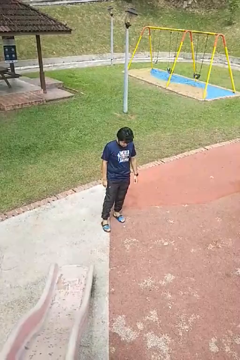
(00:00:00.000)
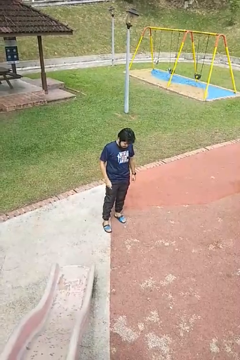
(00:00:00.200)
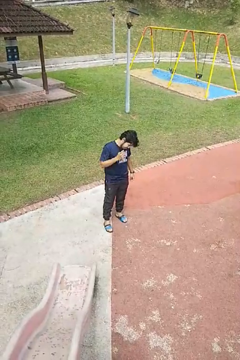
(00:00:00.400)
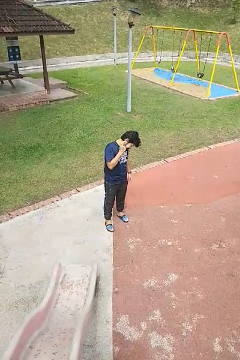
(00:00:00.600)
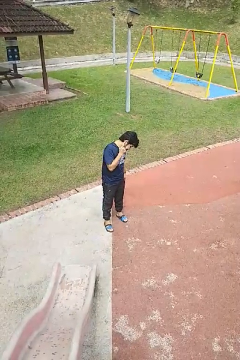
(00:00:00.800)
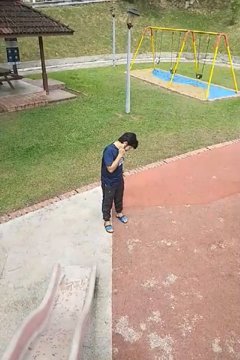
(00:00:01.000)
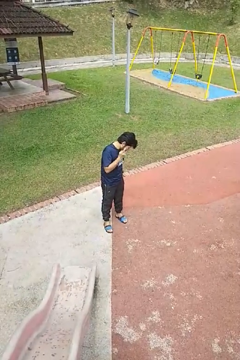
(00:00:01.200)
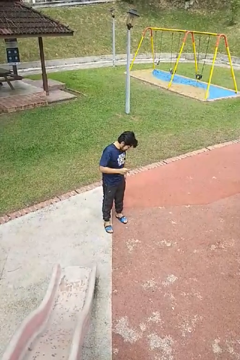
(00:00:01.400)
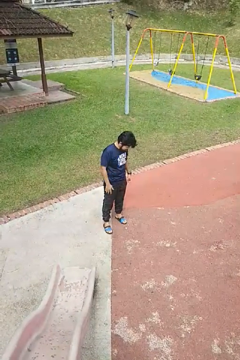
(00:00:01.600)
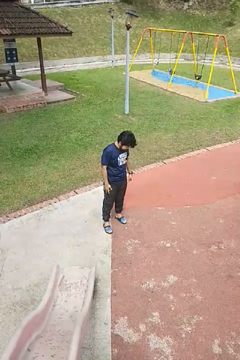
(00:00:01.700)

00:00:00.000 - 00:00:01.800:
person gestures listen closely

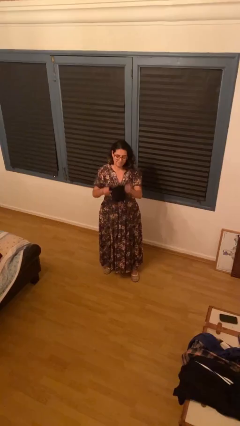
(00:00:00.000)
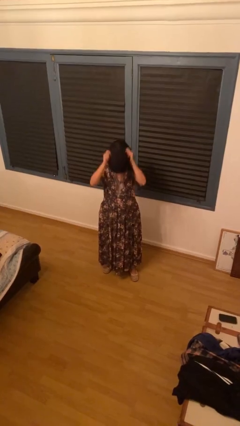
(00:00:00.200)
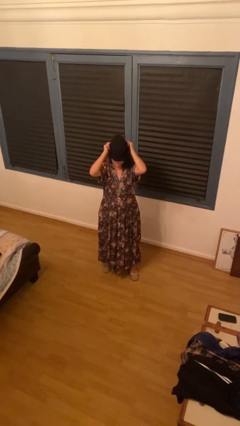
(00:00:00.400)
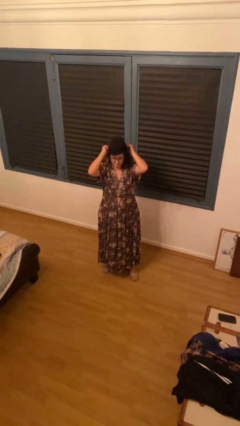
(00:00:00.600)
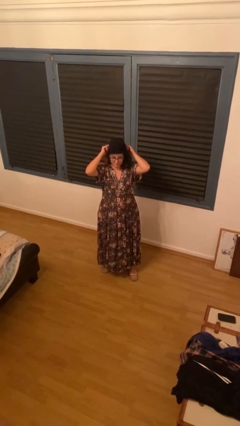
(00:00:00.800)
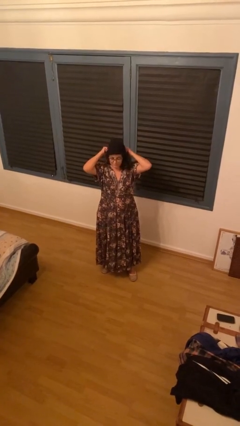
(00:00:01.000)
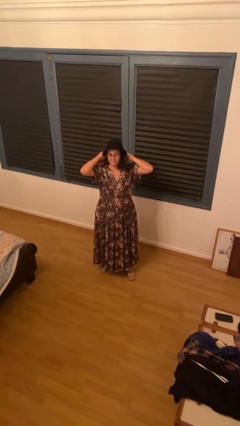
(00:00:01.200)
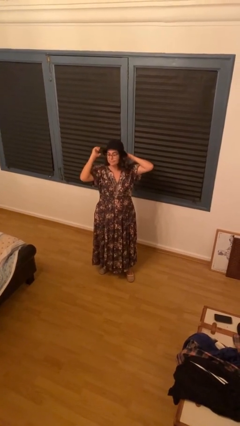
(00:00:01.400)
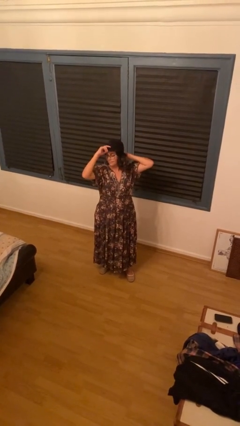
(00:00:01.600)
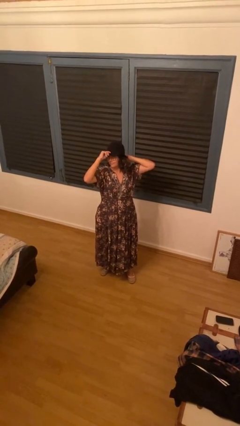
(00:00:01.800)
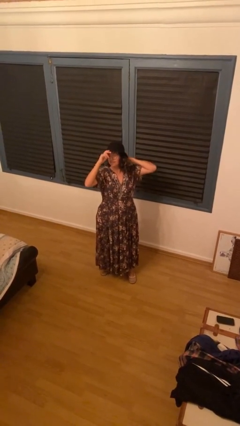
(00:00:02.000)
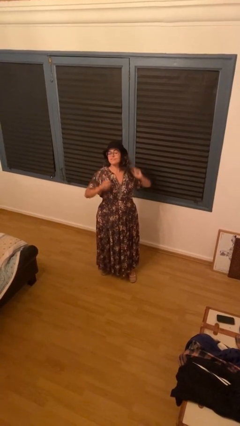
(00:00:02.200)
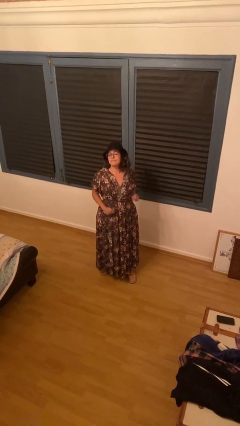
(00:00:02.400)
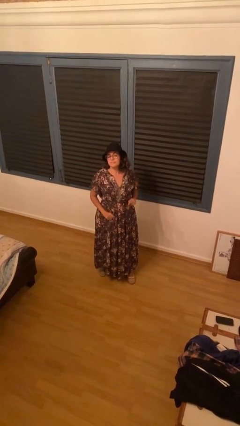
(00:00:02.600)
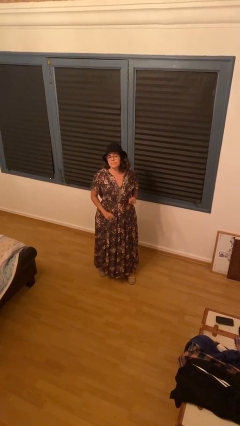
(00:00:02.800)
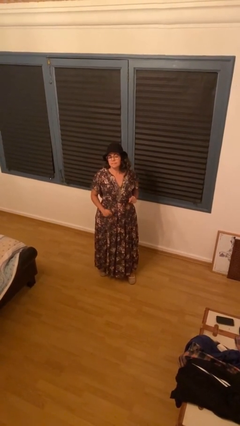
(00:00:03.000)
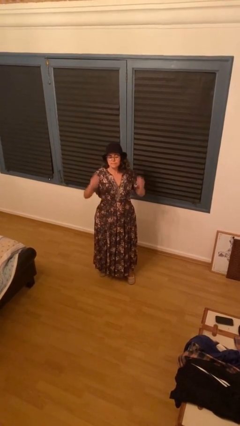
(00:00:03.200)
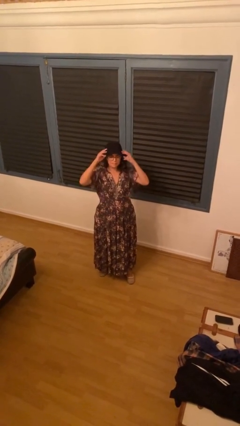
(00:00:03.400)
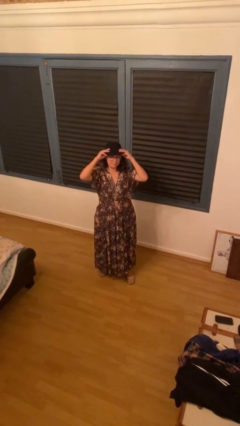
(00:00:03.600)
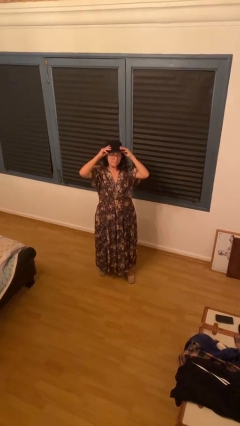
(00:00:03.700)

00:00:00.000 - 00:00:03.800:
person puts on hat

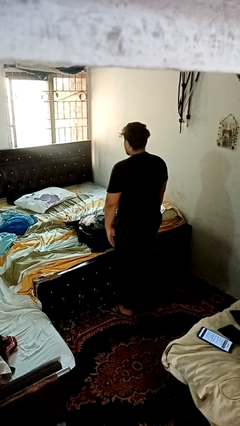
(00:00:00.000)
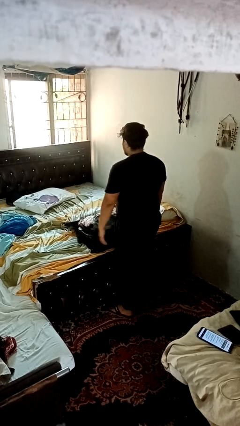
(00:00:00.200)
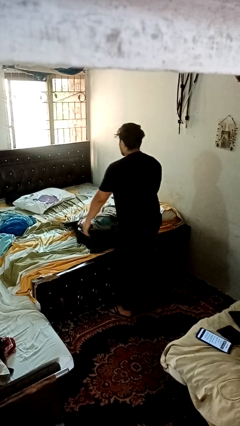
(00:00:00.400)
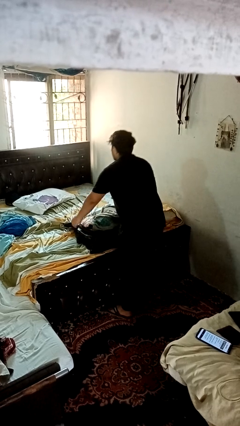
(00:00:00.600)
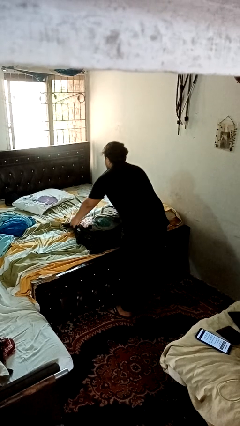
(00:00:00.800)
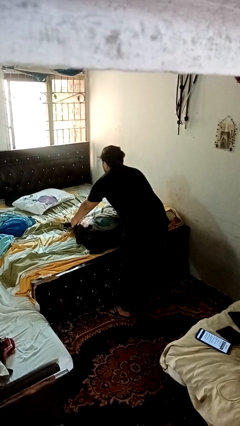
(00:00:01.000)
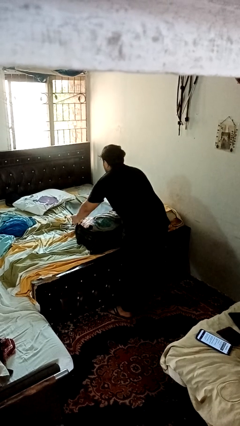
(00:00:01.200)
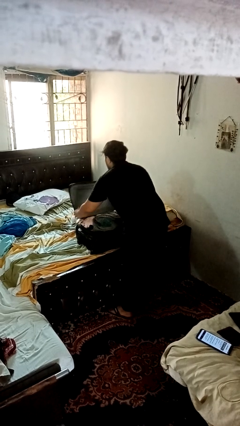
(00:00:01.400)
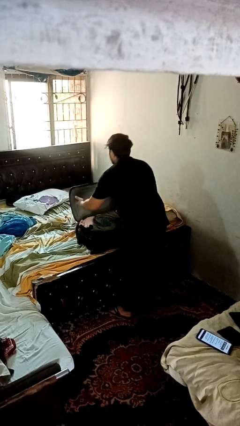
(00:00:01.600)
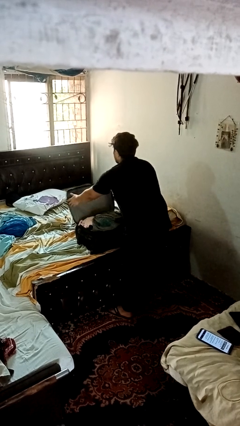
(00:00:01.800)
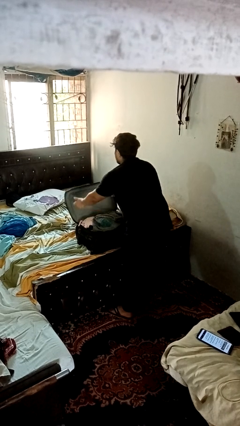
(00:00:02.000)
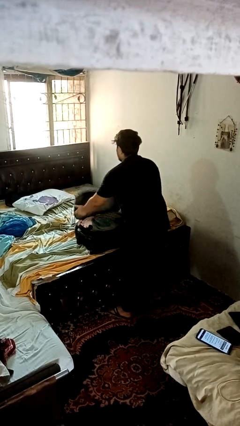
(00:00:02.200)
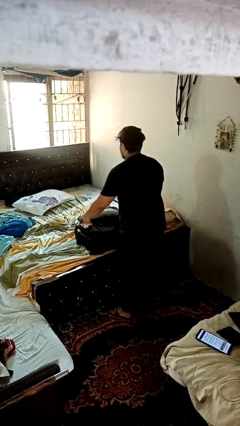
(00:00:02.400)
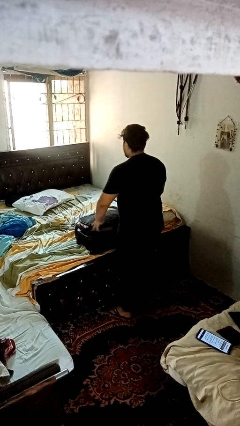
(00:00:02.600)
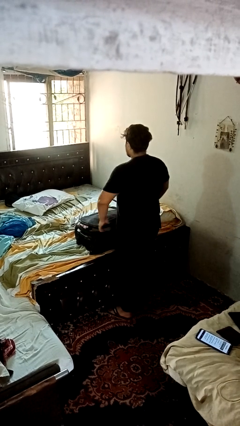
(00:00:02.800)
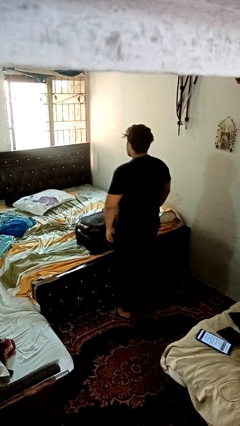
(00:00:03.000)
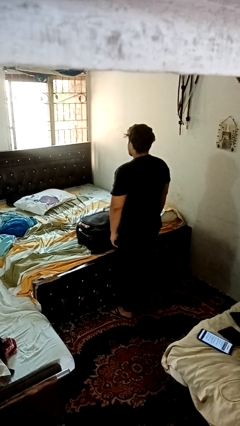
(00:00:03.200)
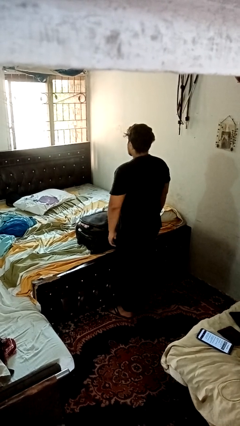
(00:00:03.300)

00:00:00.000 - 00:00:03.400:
person closes suitcase

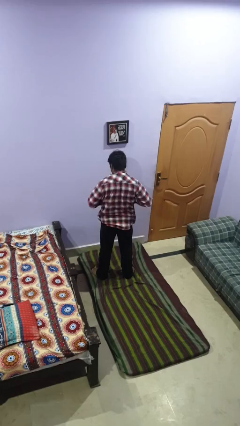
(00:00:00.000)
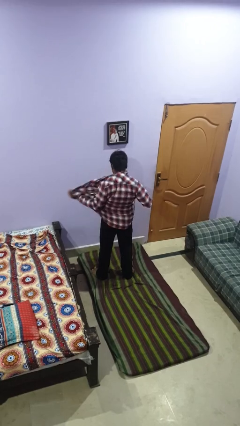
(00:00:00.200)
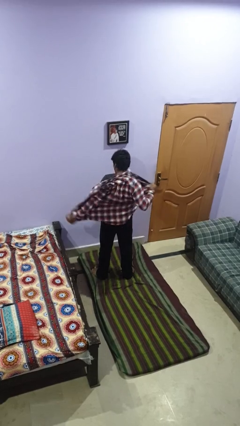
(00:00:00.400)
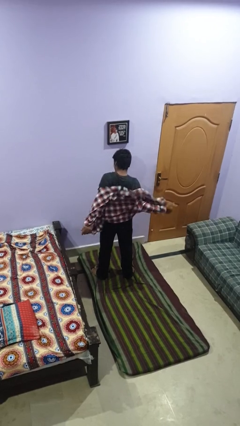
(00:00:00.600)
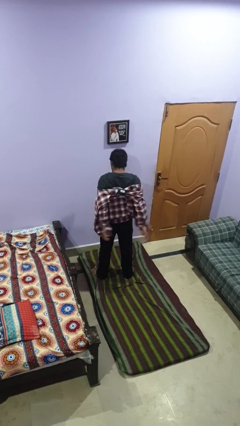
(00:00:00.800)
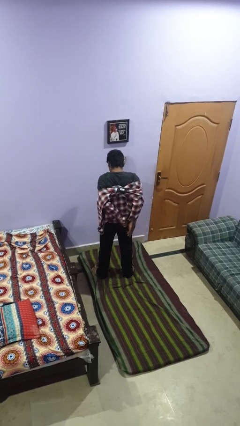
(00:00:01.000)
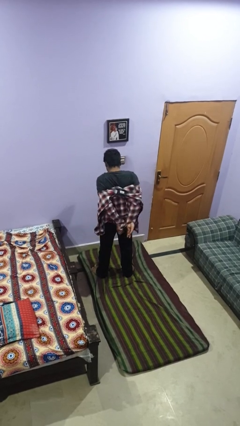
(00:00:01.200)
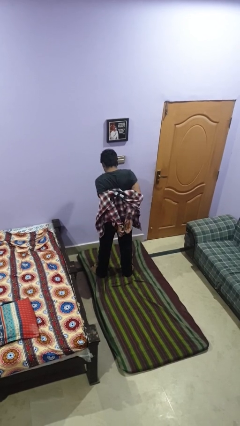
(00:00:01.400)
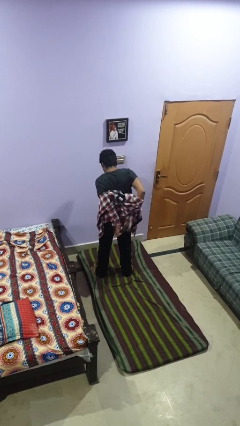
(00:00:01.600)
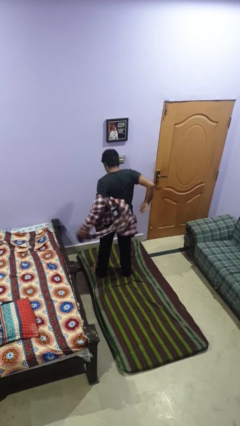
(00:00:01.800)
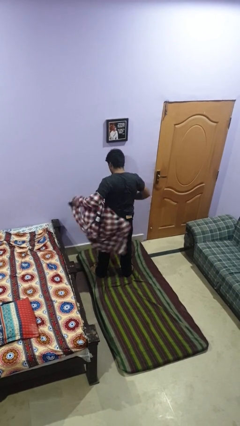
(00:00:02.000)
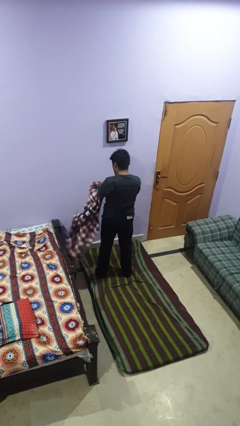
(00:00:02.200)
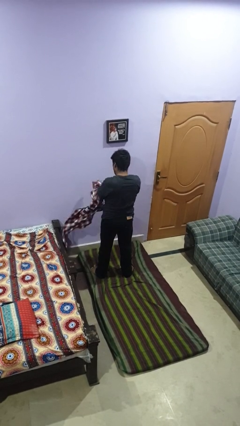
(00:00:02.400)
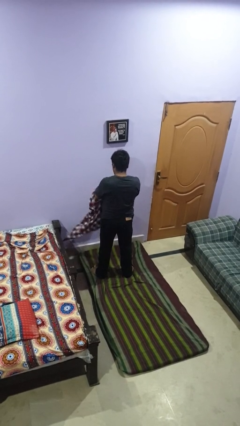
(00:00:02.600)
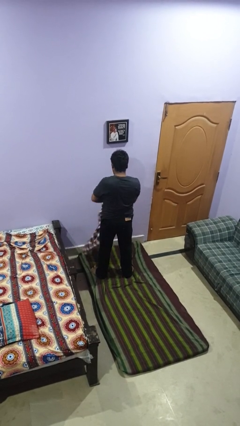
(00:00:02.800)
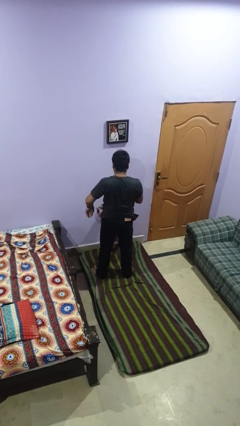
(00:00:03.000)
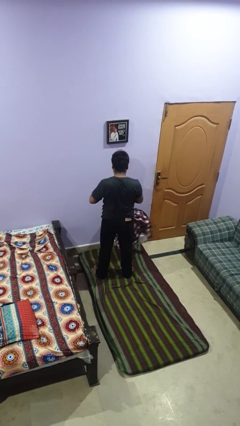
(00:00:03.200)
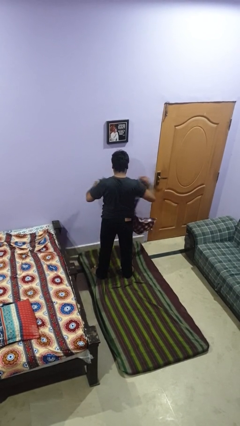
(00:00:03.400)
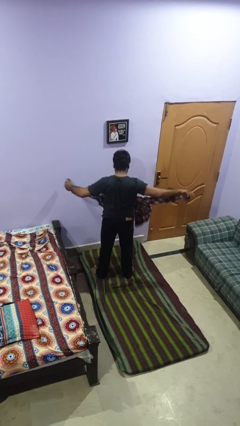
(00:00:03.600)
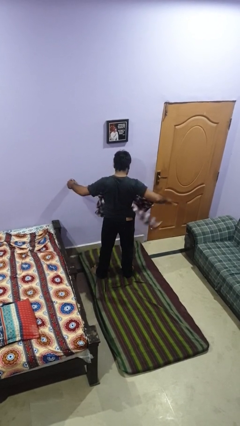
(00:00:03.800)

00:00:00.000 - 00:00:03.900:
person takes off shirt

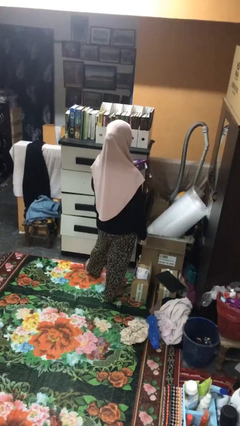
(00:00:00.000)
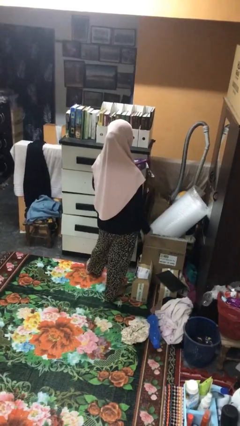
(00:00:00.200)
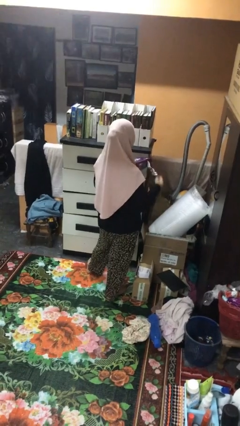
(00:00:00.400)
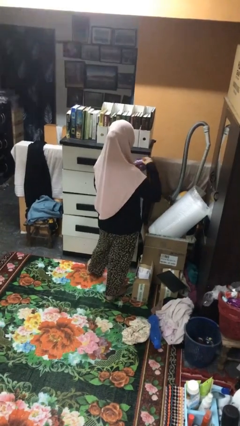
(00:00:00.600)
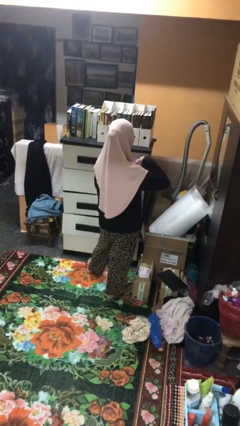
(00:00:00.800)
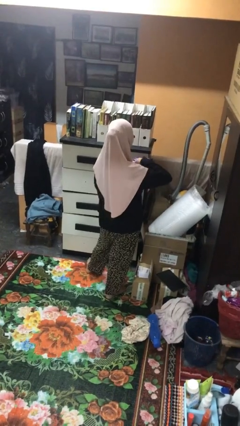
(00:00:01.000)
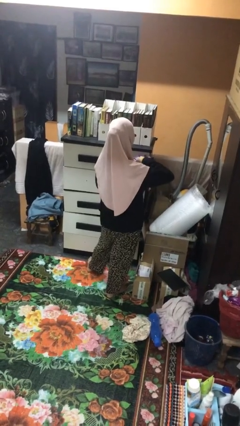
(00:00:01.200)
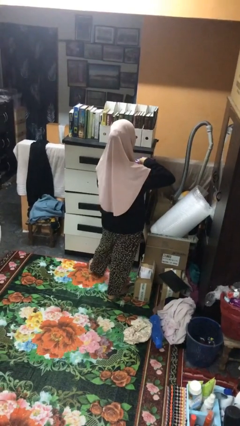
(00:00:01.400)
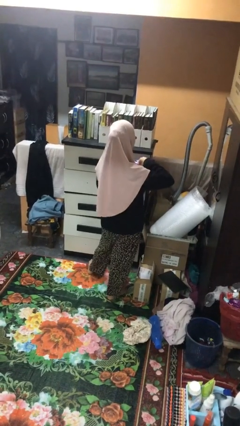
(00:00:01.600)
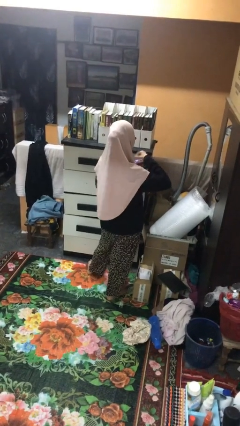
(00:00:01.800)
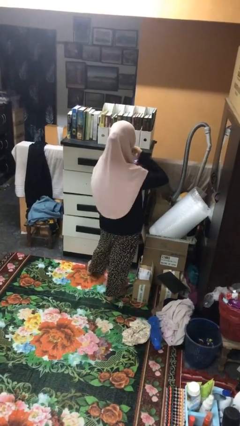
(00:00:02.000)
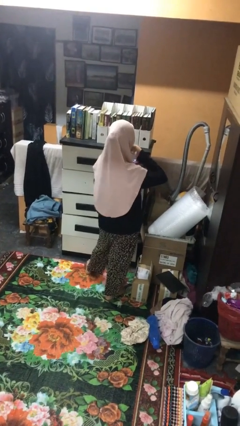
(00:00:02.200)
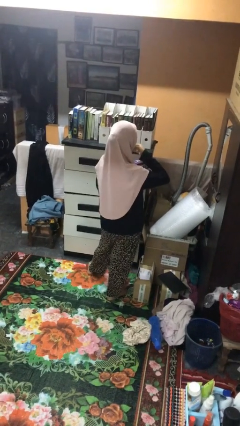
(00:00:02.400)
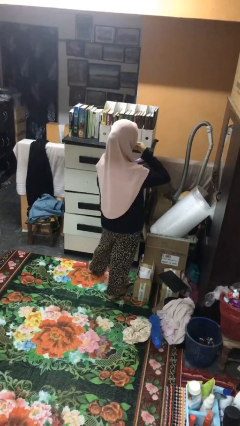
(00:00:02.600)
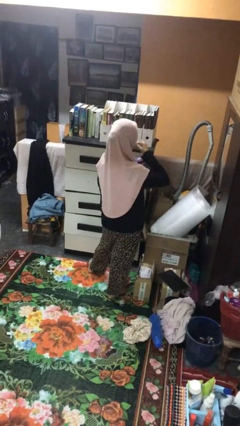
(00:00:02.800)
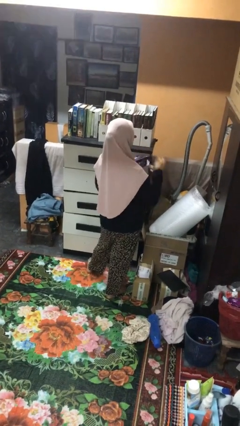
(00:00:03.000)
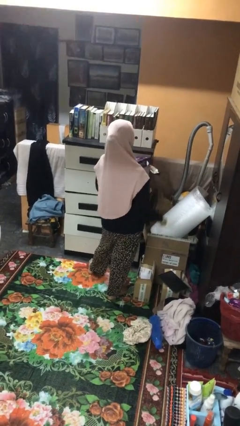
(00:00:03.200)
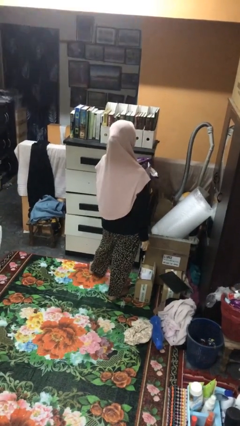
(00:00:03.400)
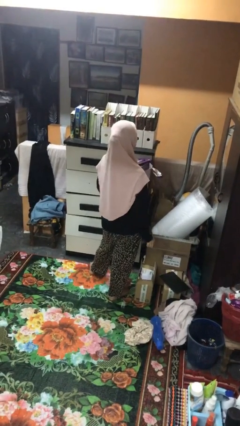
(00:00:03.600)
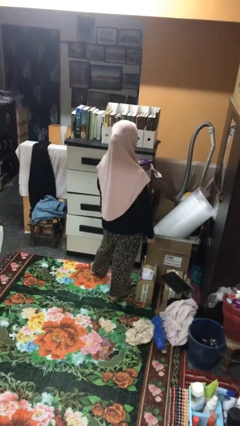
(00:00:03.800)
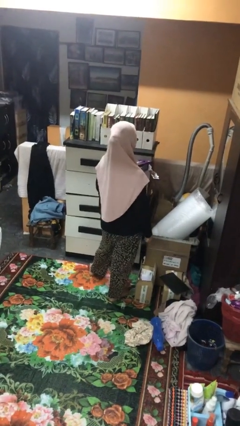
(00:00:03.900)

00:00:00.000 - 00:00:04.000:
person eats snack from bag

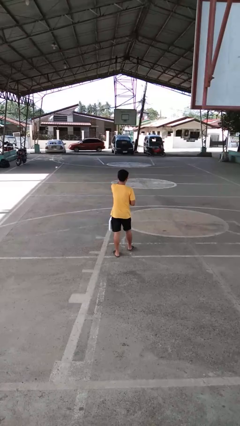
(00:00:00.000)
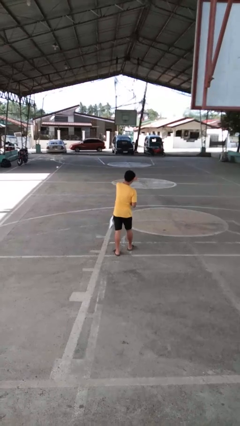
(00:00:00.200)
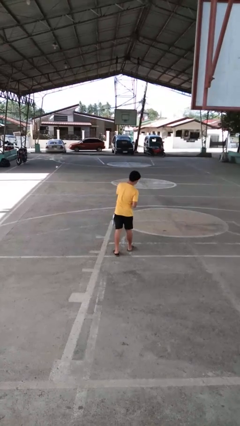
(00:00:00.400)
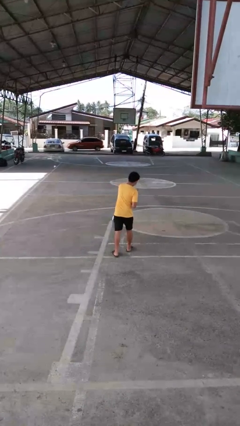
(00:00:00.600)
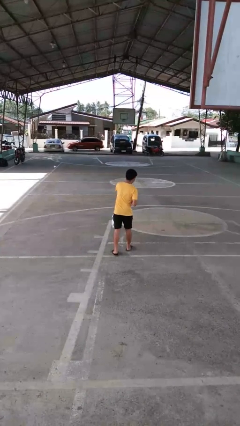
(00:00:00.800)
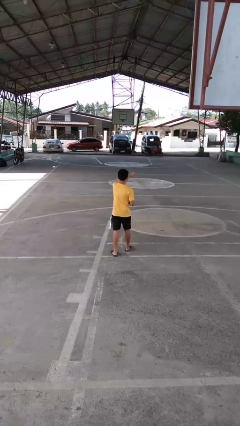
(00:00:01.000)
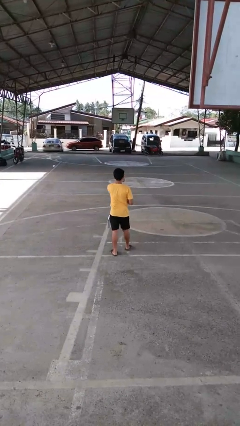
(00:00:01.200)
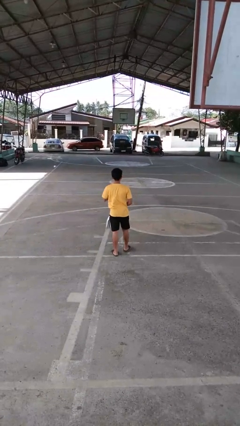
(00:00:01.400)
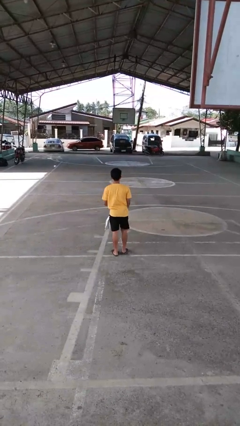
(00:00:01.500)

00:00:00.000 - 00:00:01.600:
person punches
